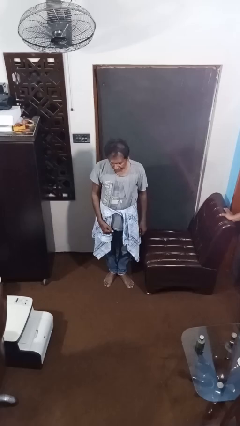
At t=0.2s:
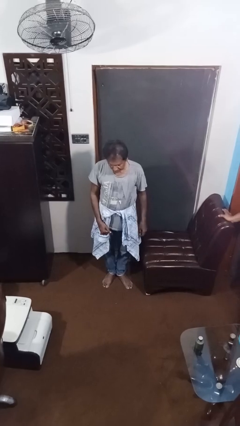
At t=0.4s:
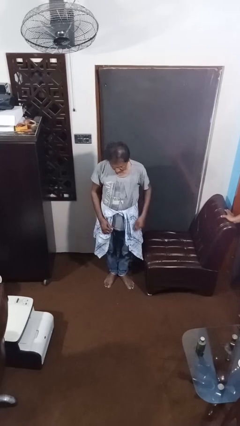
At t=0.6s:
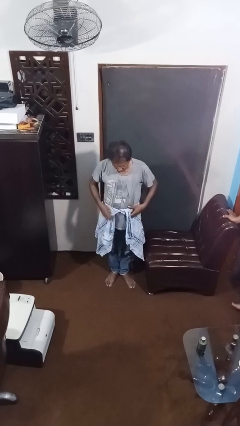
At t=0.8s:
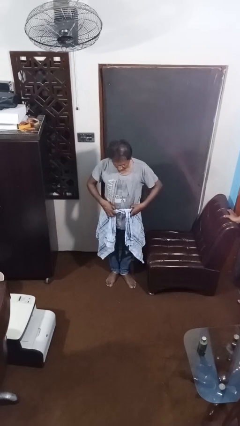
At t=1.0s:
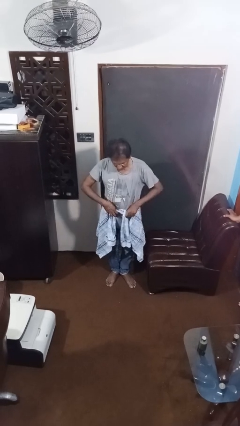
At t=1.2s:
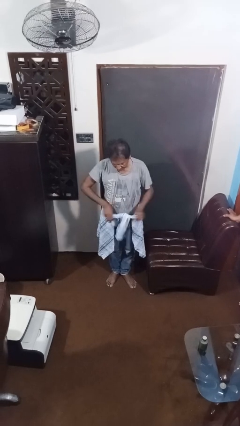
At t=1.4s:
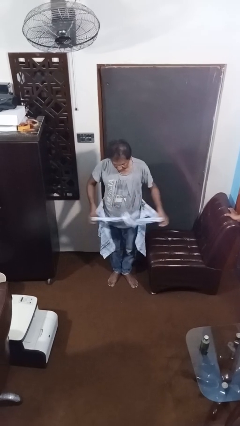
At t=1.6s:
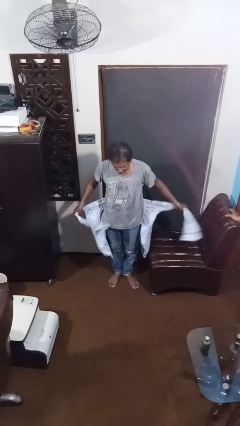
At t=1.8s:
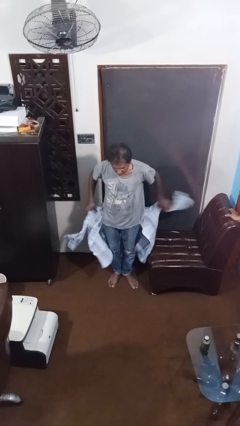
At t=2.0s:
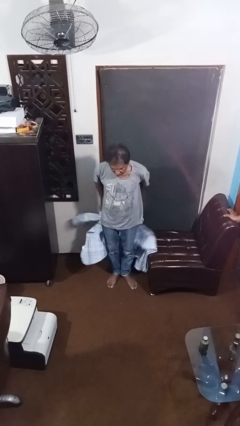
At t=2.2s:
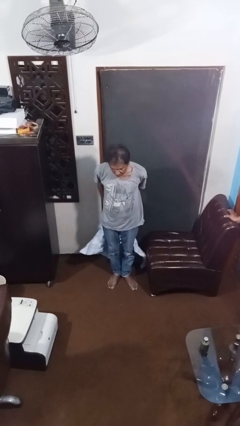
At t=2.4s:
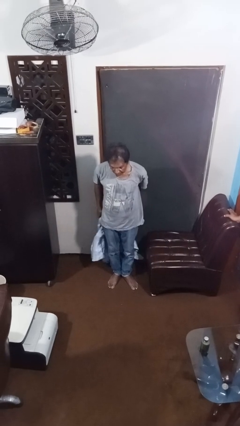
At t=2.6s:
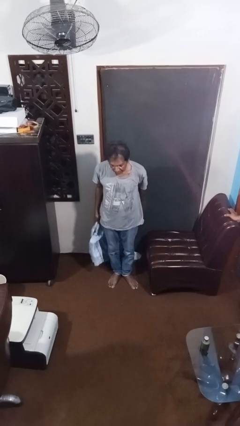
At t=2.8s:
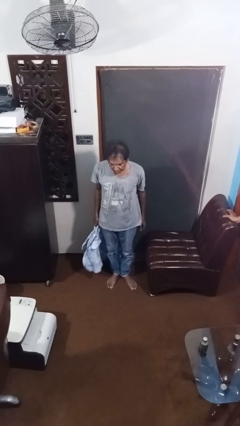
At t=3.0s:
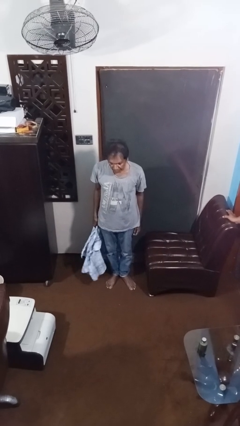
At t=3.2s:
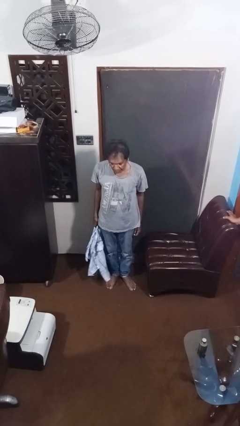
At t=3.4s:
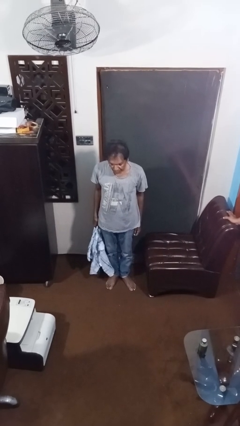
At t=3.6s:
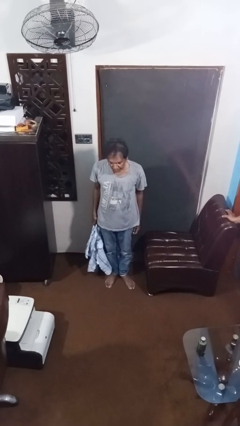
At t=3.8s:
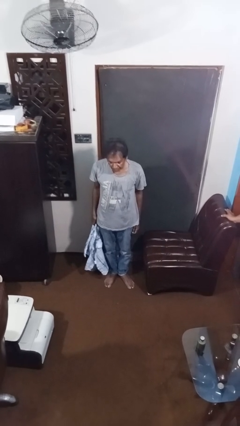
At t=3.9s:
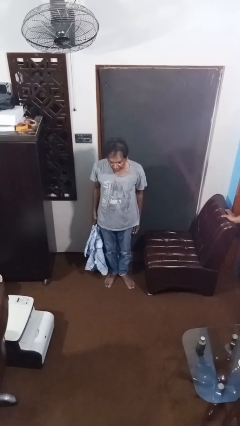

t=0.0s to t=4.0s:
person unties jacket around waist

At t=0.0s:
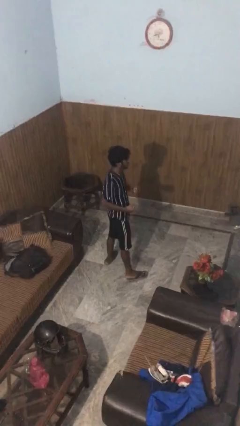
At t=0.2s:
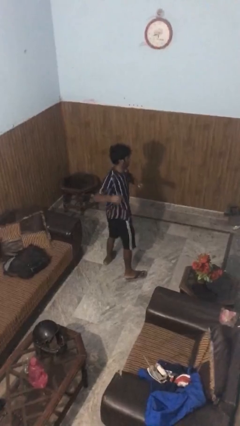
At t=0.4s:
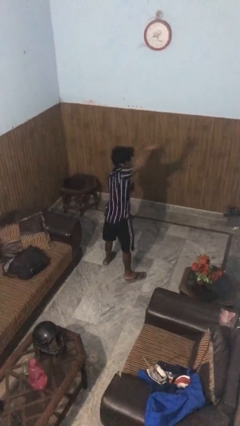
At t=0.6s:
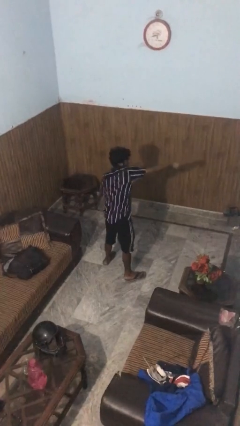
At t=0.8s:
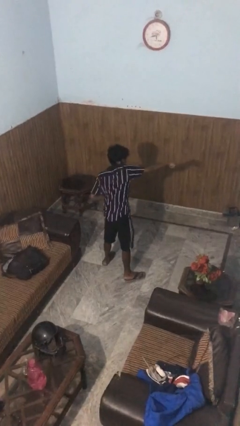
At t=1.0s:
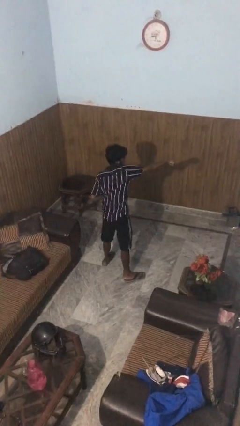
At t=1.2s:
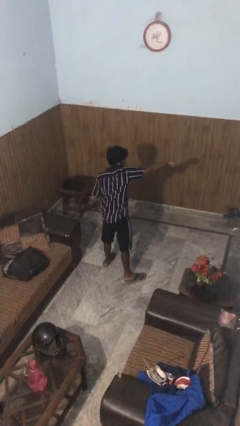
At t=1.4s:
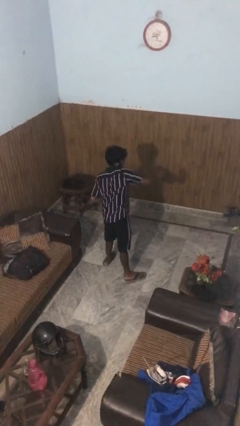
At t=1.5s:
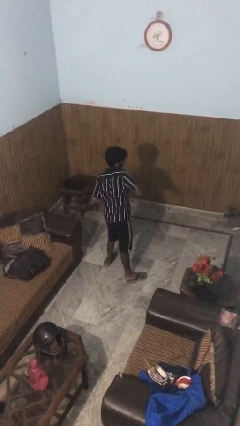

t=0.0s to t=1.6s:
person punches

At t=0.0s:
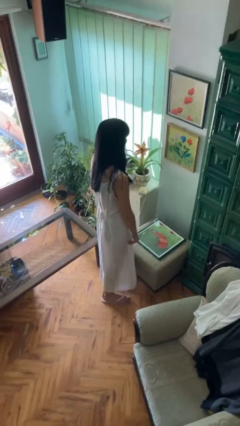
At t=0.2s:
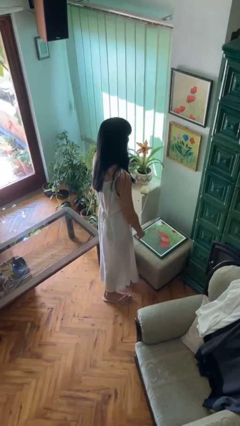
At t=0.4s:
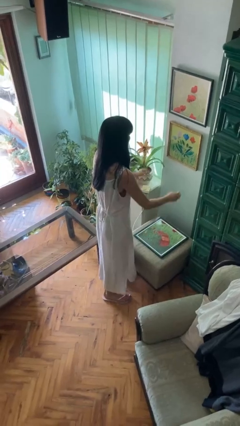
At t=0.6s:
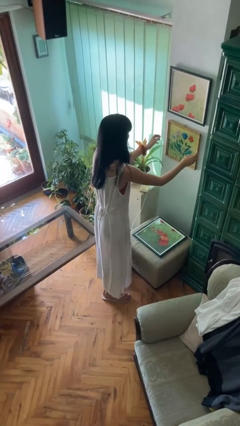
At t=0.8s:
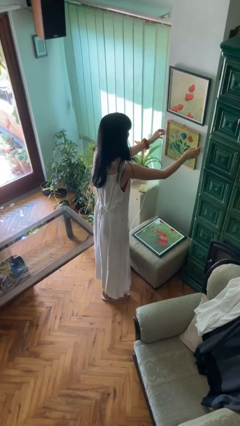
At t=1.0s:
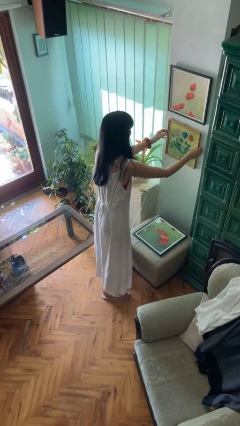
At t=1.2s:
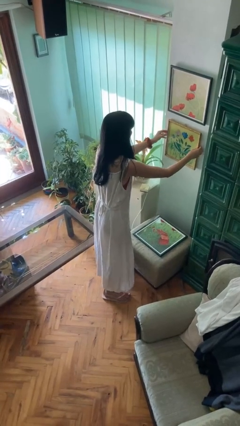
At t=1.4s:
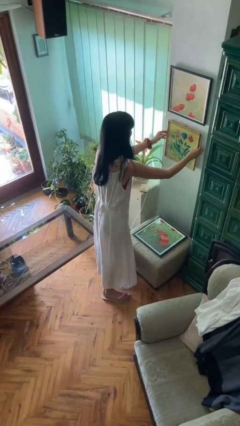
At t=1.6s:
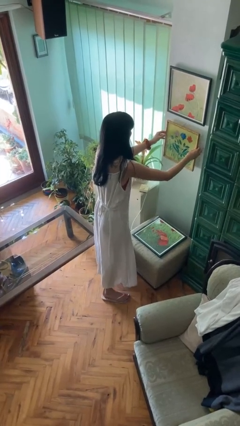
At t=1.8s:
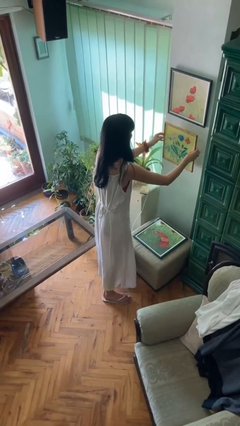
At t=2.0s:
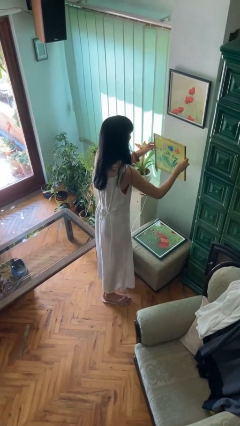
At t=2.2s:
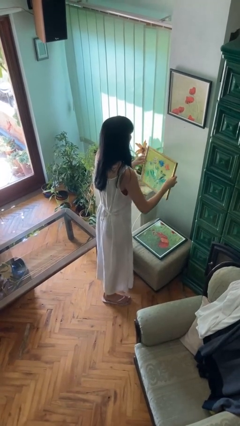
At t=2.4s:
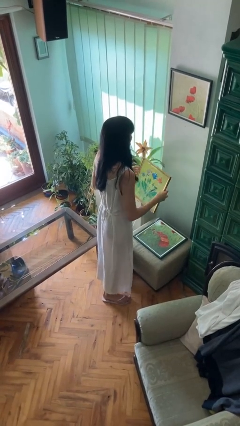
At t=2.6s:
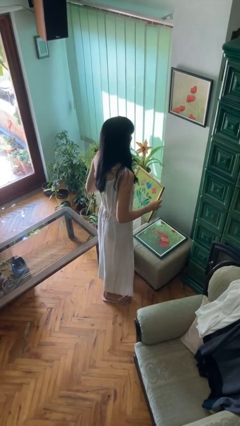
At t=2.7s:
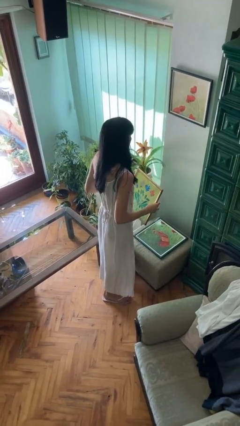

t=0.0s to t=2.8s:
person takes down picture frame

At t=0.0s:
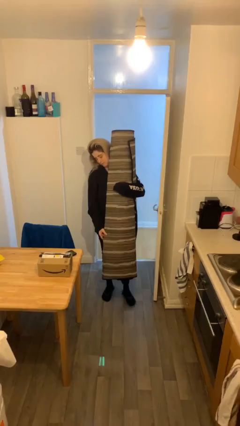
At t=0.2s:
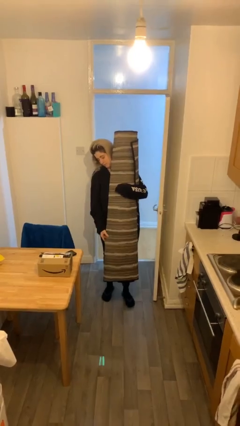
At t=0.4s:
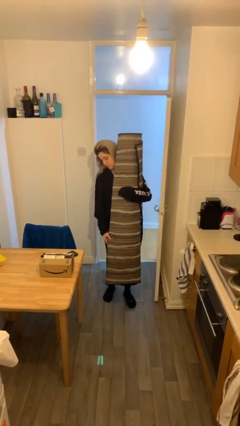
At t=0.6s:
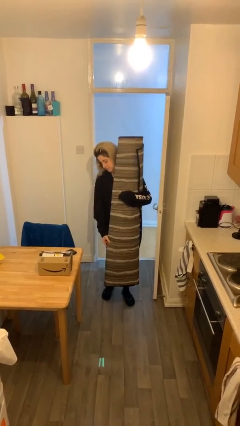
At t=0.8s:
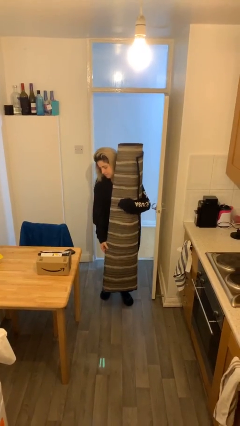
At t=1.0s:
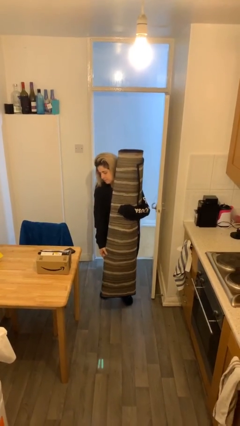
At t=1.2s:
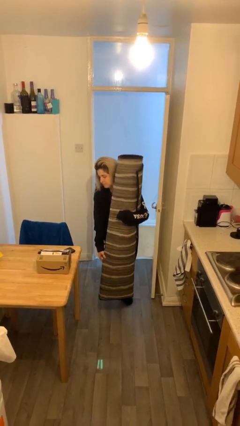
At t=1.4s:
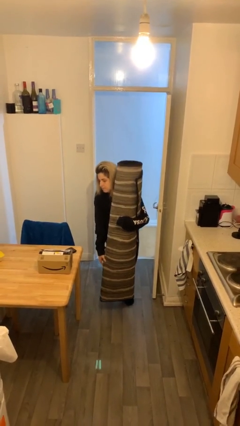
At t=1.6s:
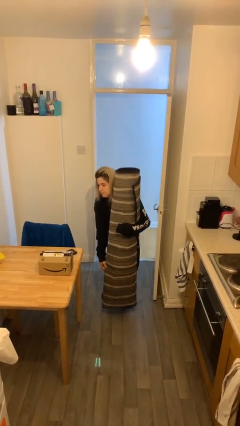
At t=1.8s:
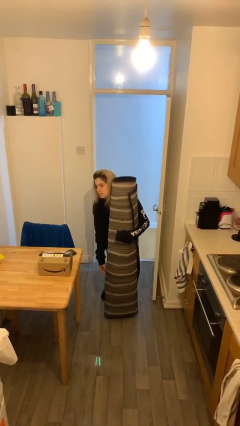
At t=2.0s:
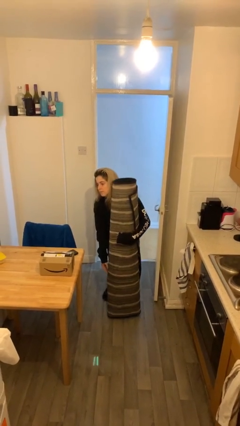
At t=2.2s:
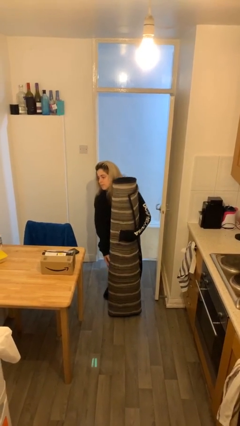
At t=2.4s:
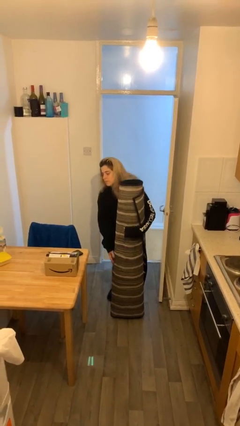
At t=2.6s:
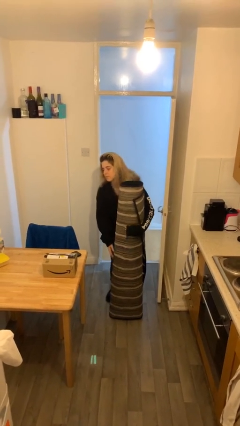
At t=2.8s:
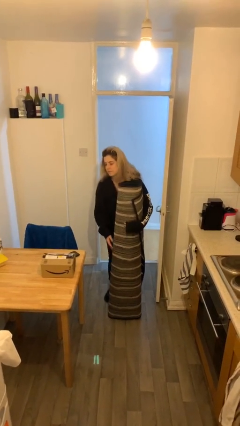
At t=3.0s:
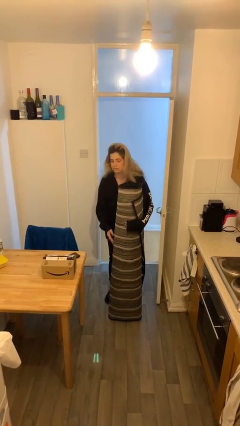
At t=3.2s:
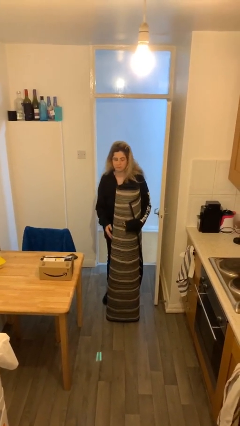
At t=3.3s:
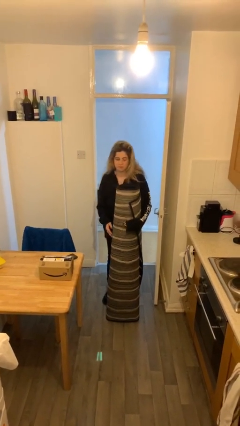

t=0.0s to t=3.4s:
person puts down object on floor

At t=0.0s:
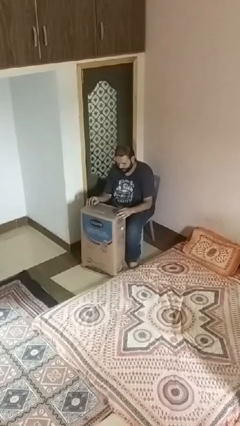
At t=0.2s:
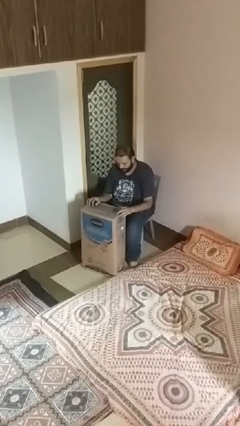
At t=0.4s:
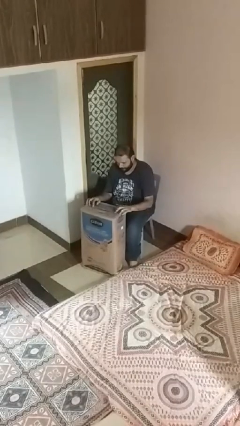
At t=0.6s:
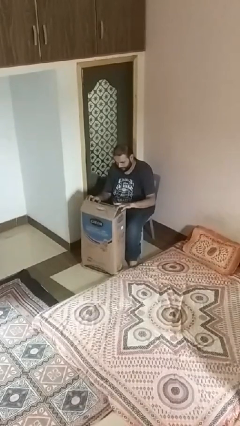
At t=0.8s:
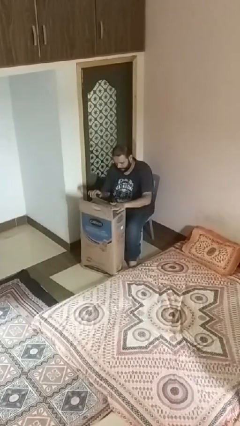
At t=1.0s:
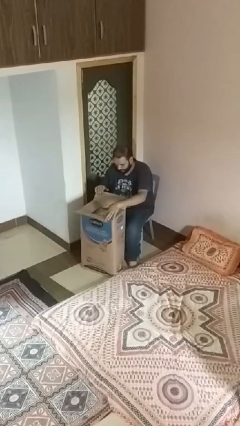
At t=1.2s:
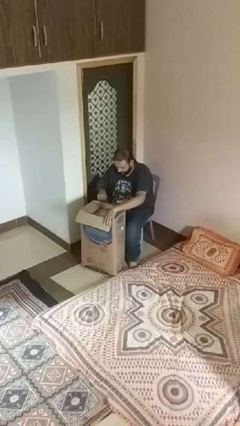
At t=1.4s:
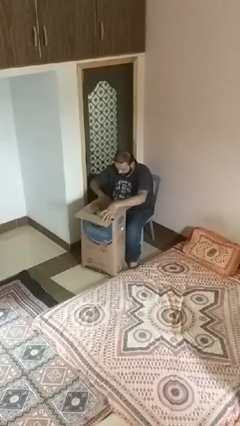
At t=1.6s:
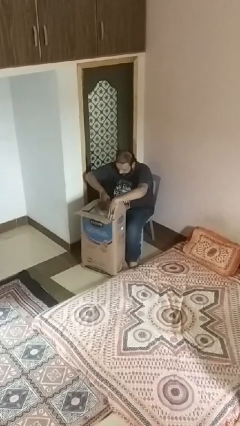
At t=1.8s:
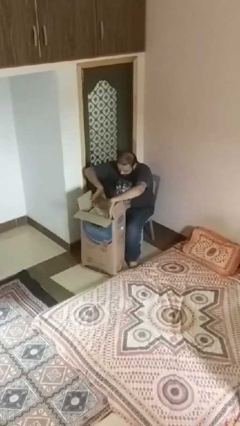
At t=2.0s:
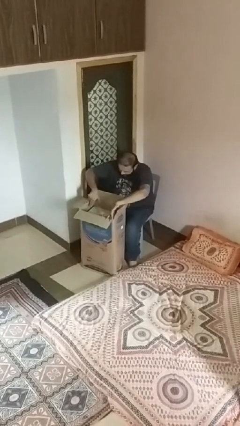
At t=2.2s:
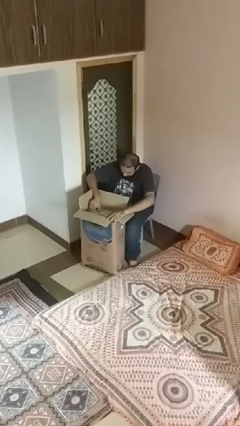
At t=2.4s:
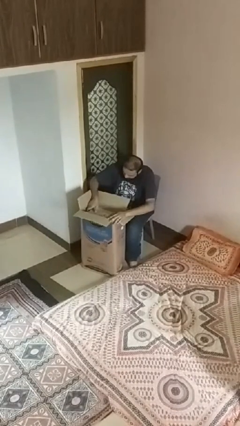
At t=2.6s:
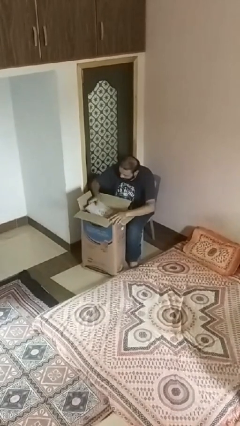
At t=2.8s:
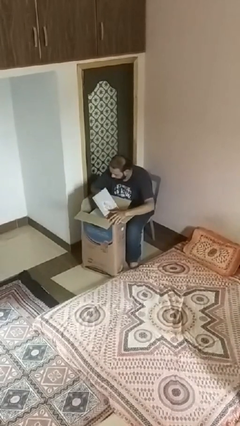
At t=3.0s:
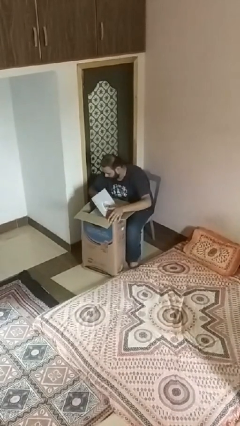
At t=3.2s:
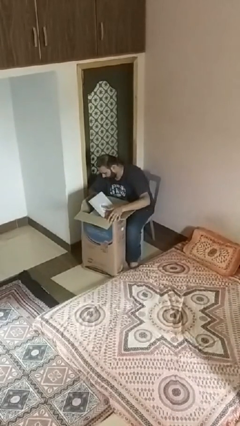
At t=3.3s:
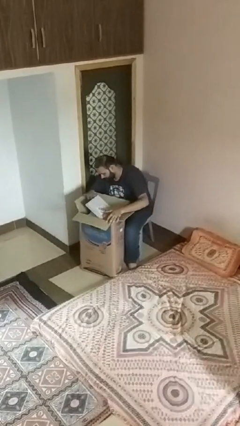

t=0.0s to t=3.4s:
person searches in box

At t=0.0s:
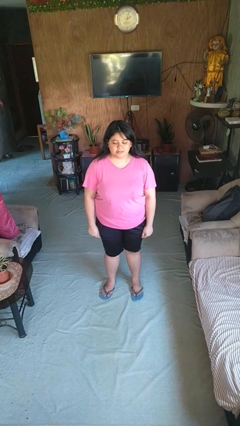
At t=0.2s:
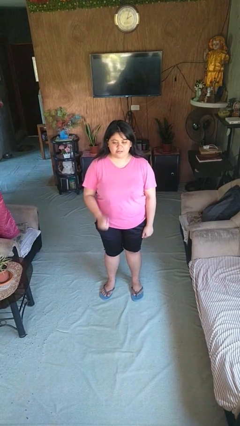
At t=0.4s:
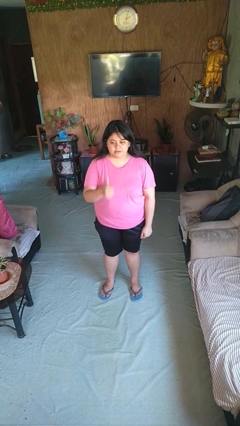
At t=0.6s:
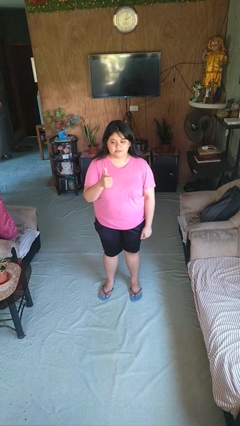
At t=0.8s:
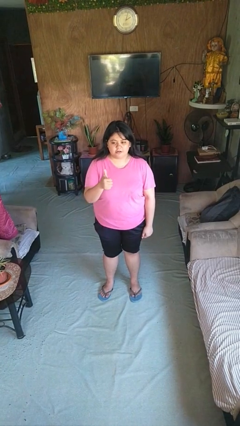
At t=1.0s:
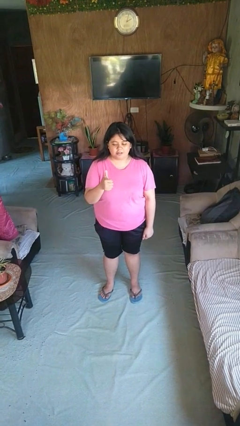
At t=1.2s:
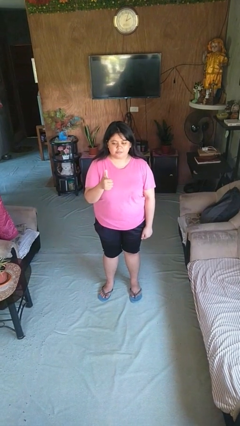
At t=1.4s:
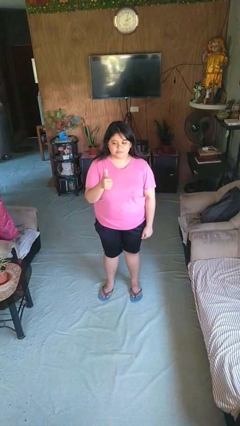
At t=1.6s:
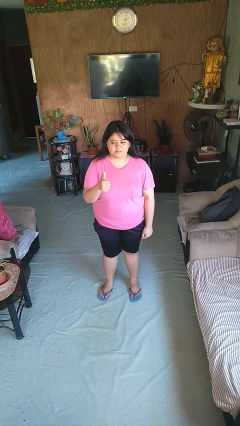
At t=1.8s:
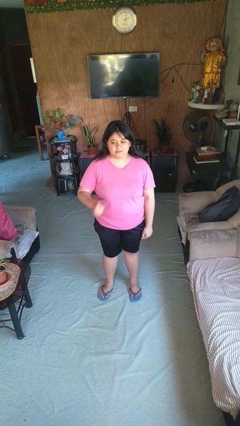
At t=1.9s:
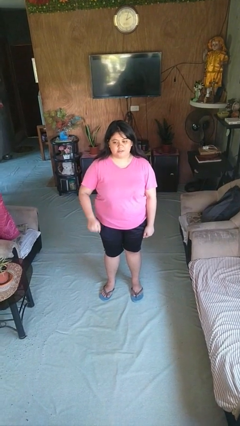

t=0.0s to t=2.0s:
person gestures thumbs up
